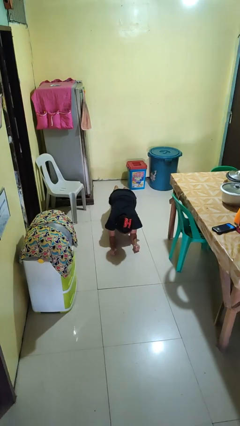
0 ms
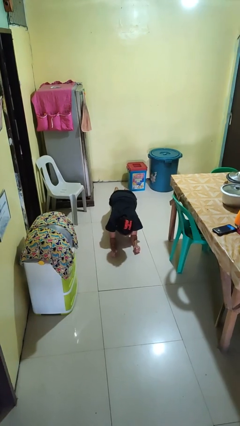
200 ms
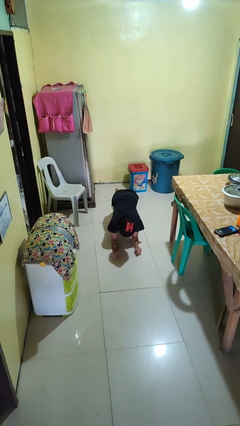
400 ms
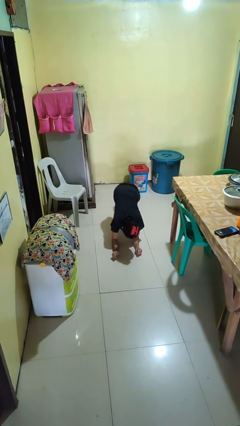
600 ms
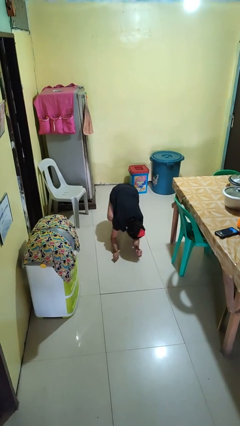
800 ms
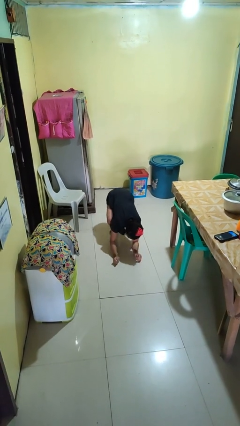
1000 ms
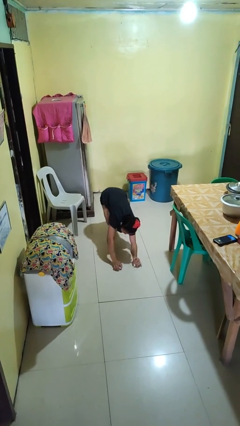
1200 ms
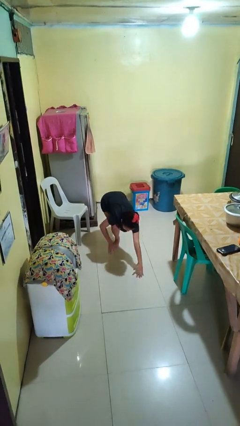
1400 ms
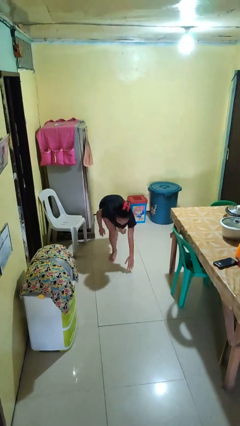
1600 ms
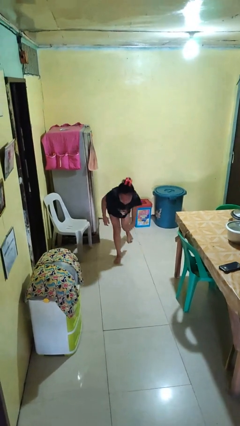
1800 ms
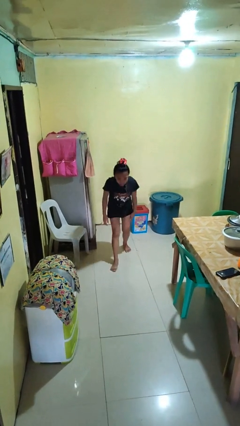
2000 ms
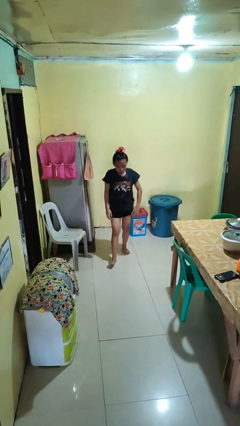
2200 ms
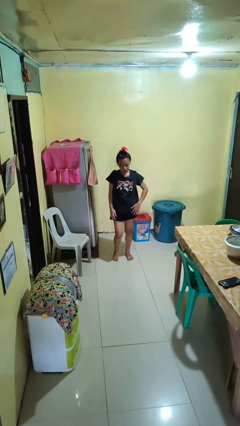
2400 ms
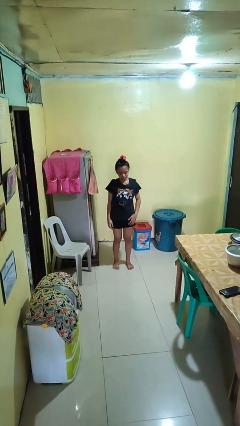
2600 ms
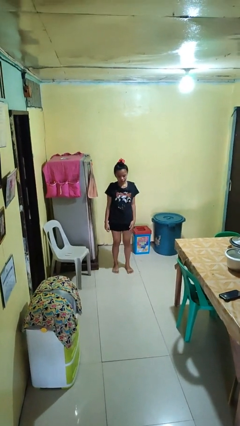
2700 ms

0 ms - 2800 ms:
person stands up from floor

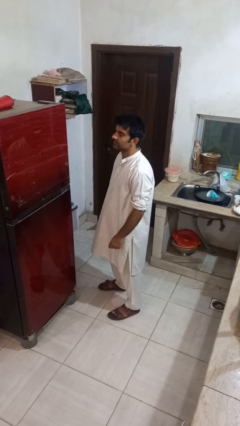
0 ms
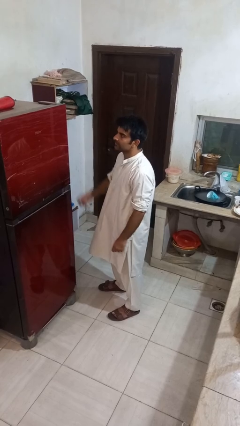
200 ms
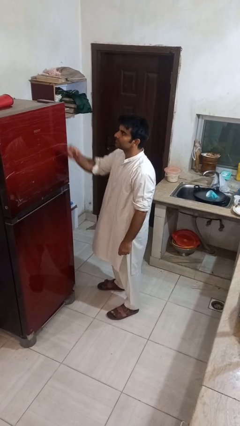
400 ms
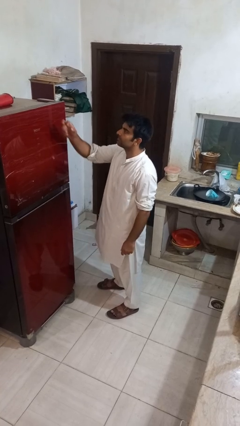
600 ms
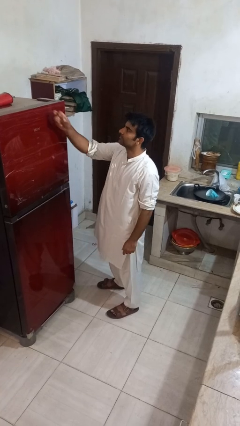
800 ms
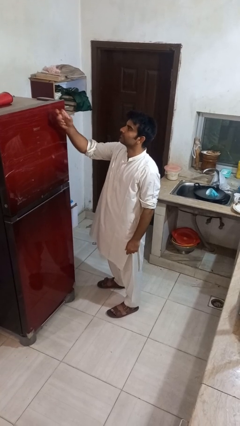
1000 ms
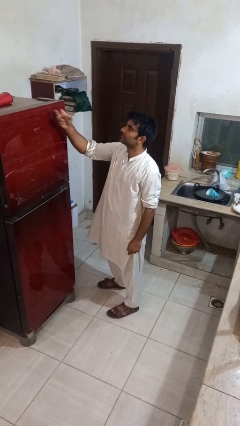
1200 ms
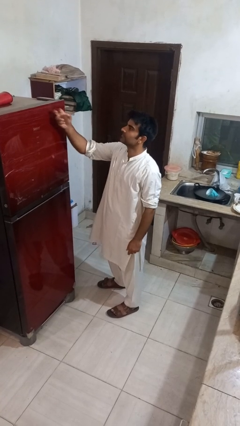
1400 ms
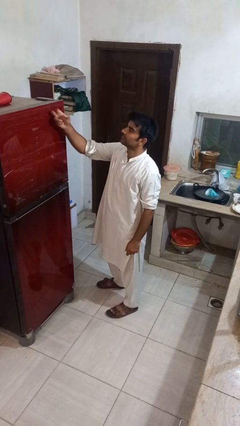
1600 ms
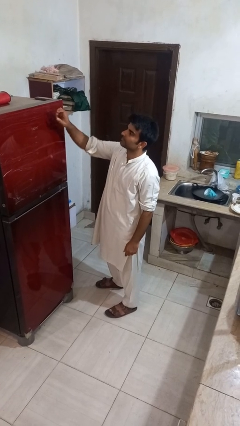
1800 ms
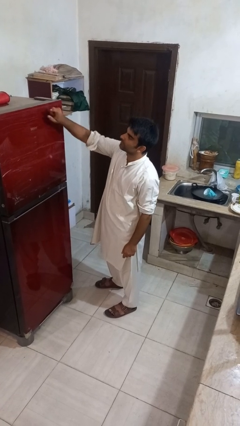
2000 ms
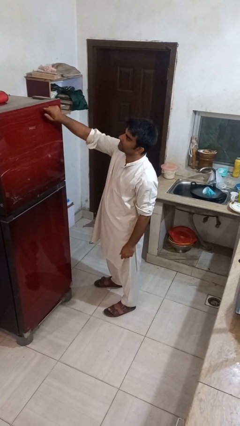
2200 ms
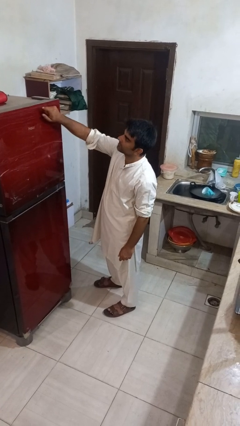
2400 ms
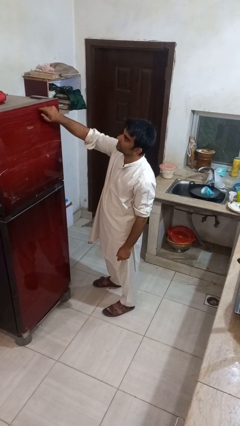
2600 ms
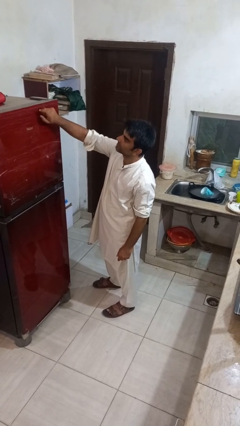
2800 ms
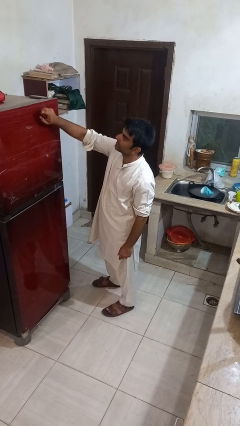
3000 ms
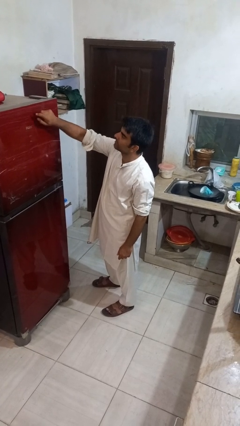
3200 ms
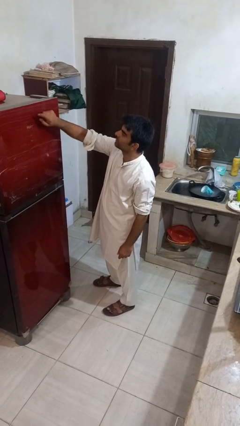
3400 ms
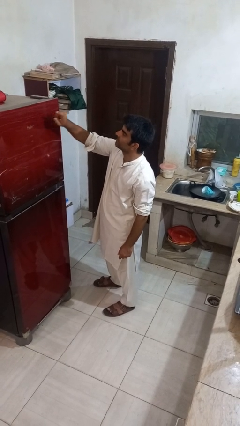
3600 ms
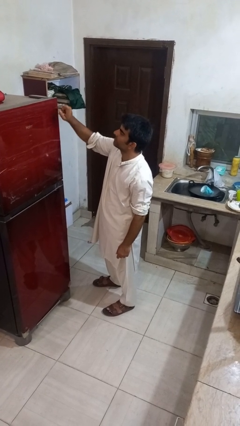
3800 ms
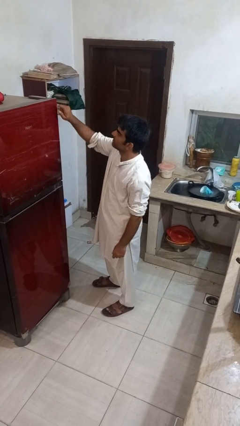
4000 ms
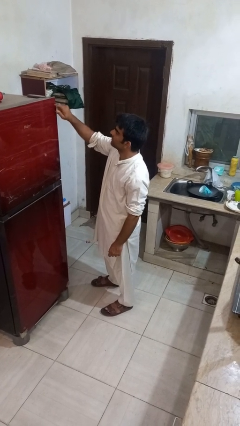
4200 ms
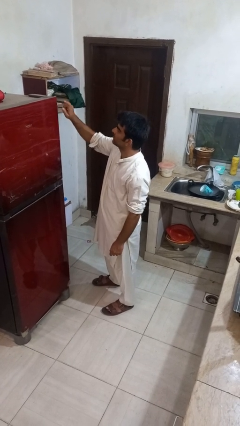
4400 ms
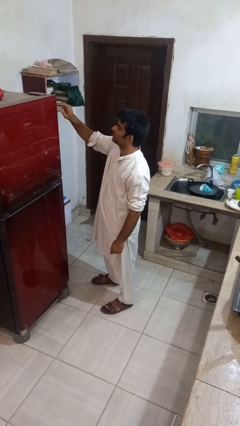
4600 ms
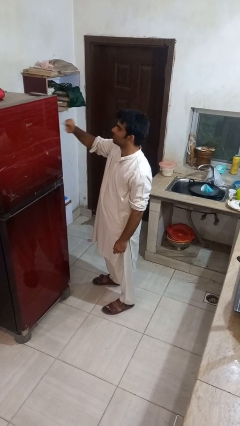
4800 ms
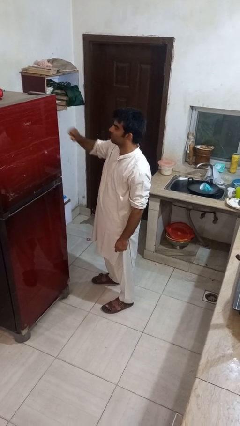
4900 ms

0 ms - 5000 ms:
person taps object with finger

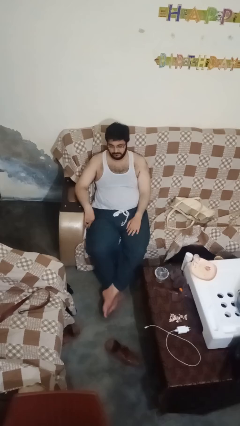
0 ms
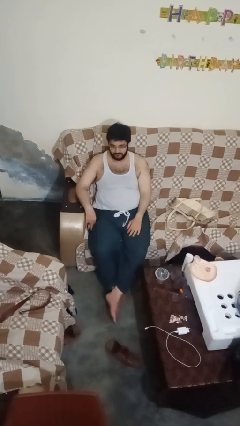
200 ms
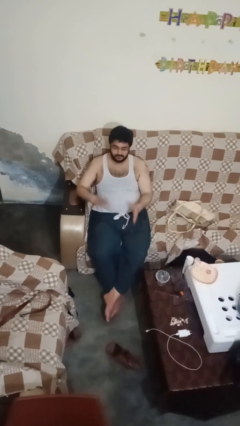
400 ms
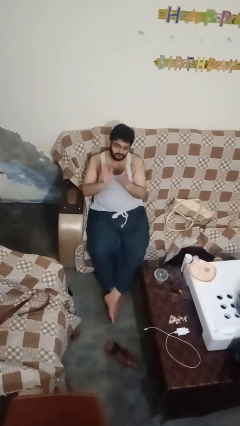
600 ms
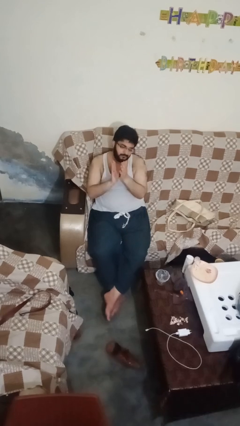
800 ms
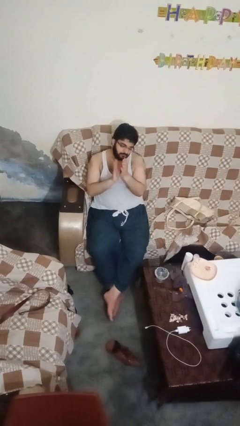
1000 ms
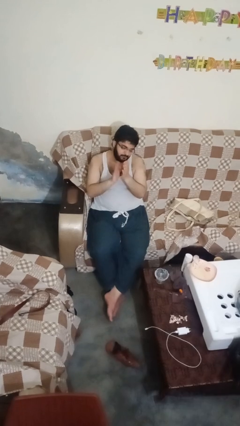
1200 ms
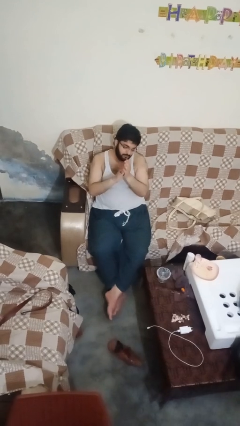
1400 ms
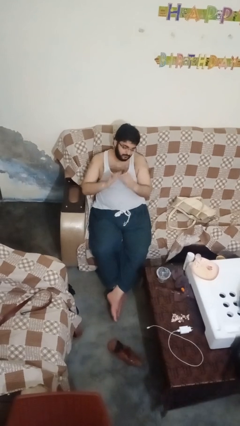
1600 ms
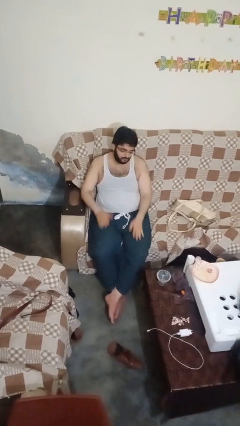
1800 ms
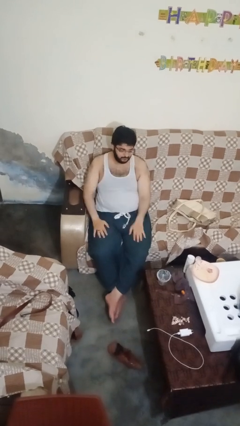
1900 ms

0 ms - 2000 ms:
person claps hands

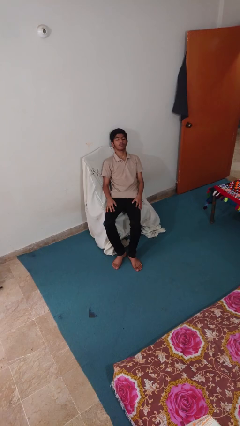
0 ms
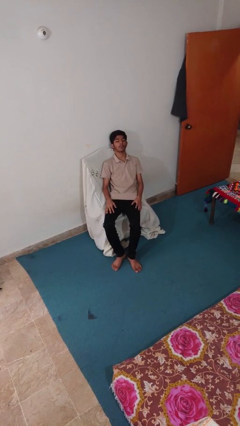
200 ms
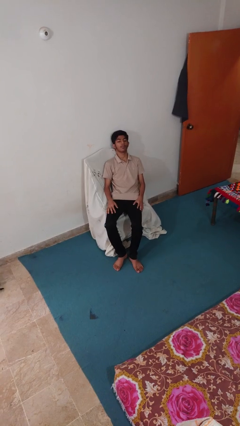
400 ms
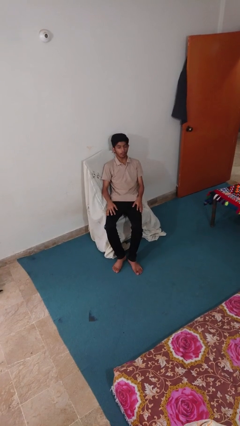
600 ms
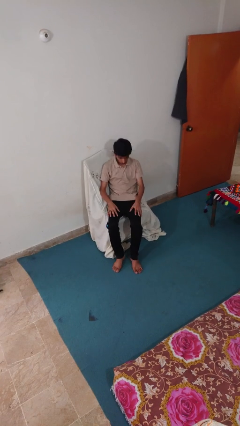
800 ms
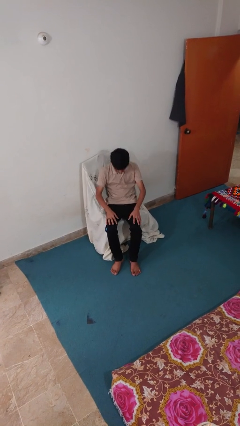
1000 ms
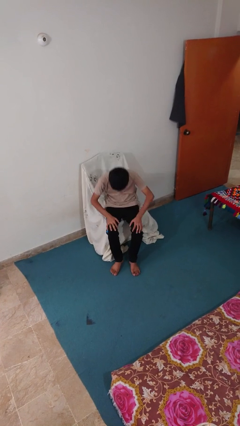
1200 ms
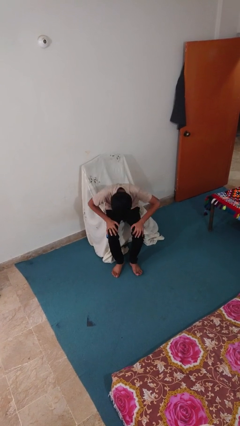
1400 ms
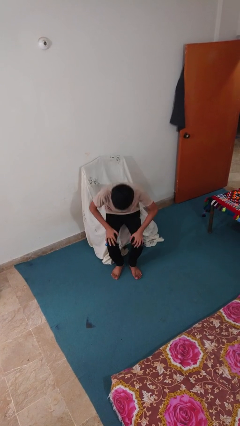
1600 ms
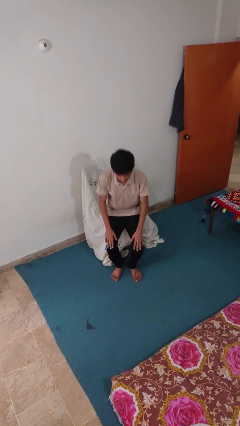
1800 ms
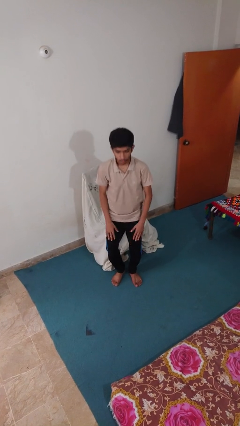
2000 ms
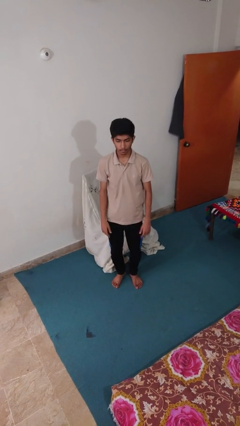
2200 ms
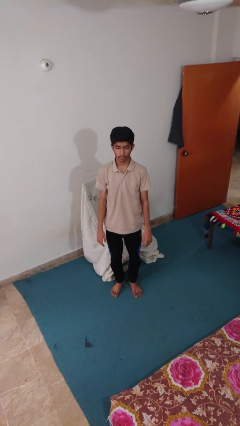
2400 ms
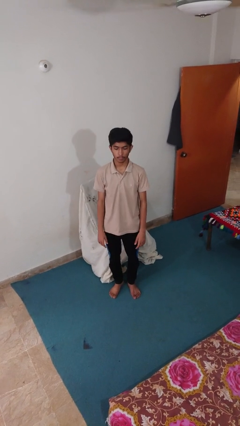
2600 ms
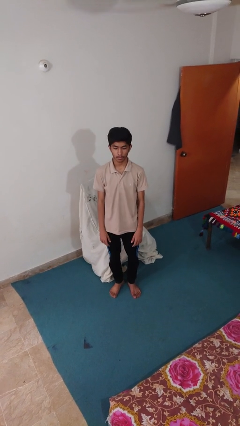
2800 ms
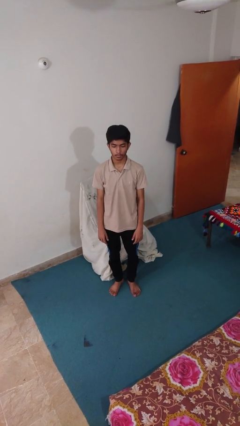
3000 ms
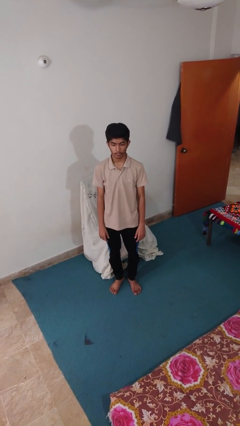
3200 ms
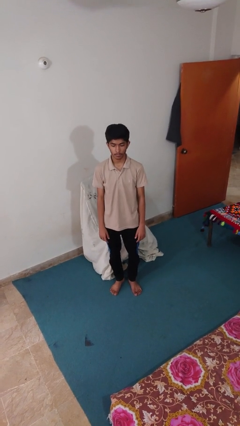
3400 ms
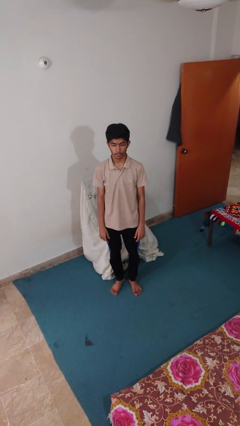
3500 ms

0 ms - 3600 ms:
person stands up

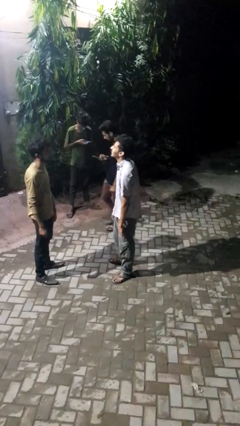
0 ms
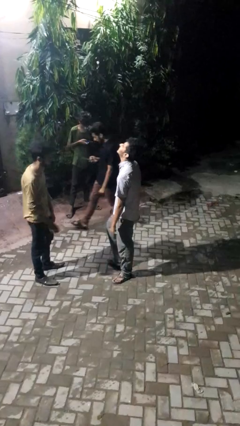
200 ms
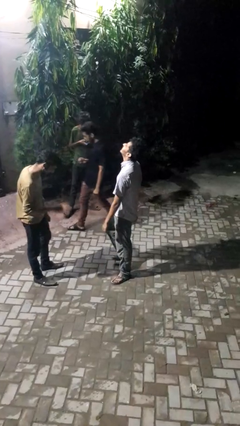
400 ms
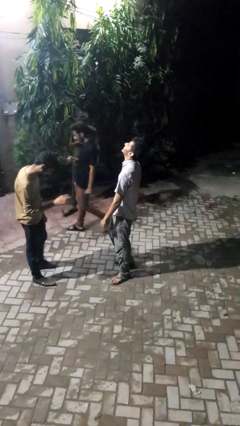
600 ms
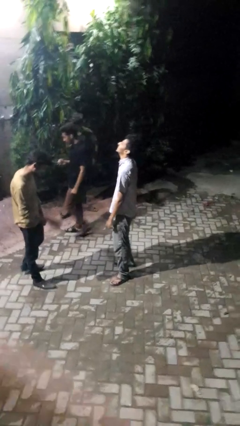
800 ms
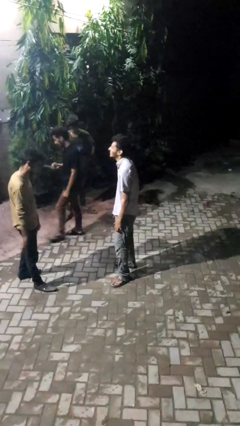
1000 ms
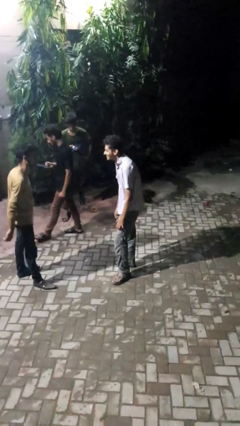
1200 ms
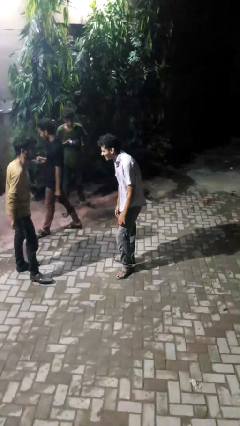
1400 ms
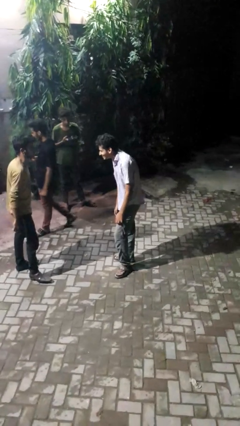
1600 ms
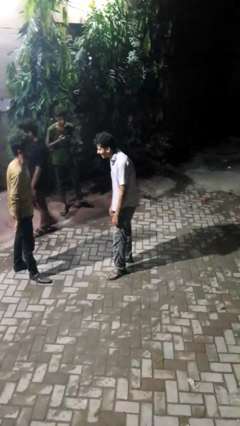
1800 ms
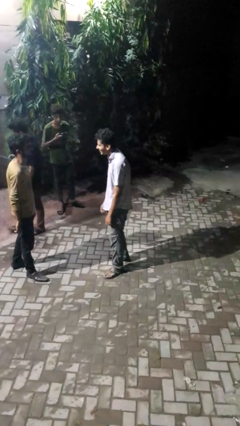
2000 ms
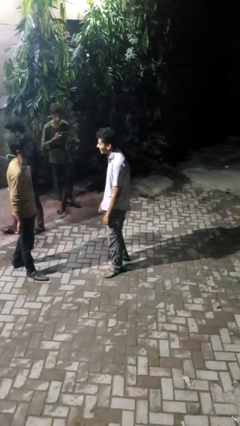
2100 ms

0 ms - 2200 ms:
person laughs with person

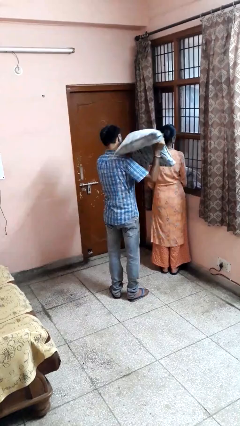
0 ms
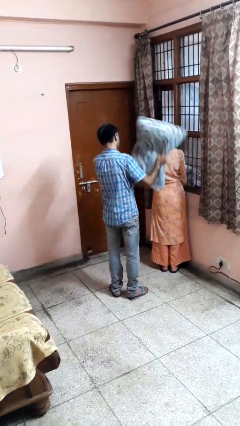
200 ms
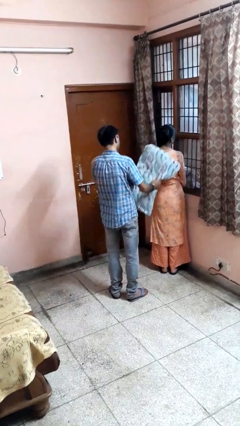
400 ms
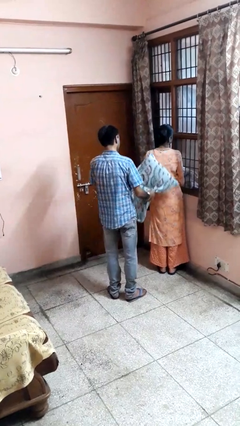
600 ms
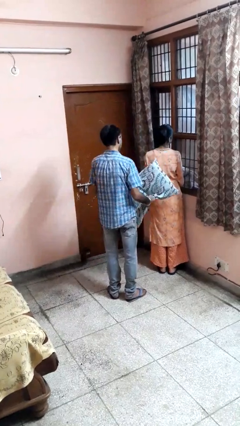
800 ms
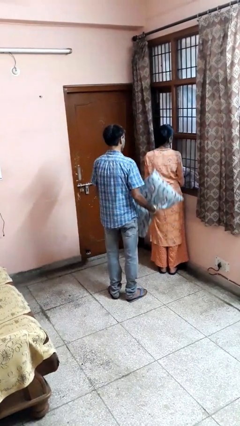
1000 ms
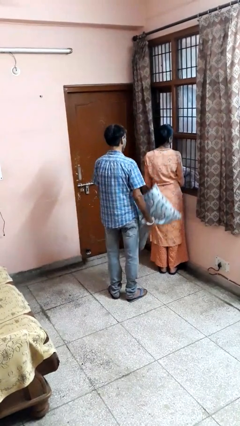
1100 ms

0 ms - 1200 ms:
person hits person with pillow

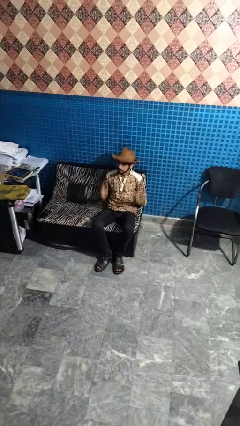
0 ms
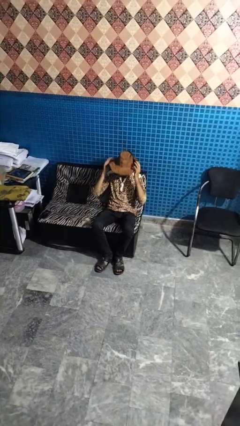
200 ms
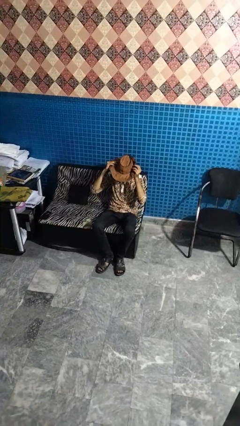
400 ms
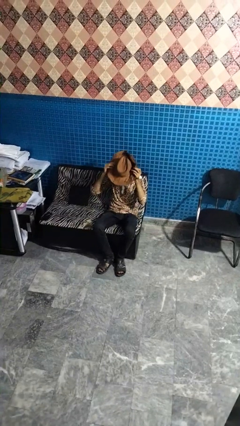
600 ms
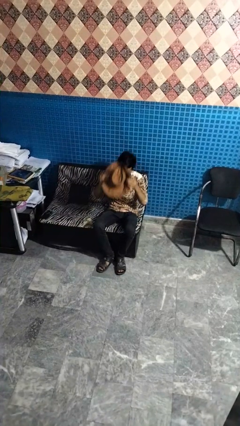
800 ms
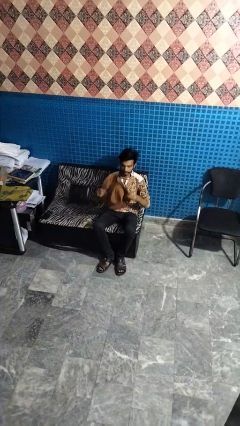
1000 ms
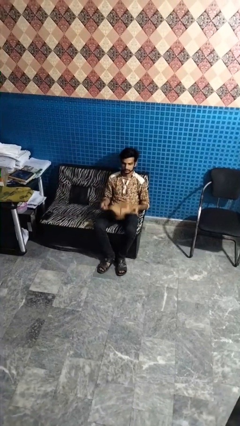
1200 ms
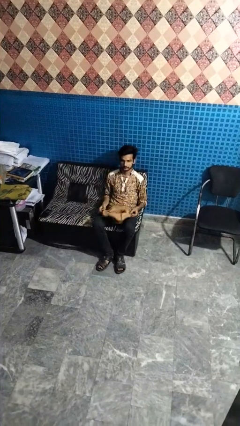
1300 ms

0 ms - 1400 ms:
person takes off hat
